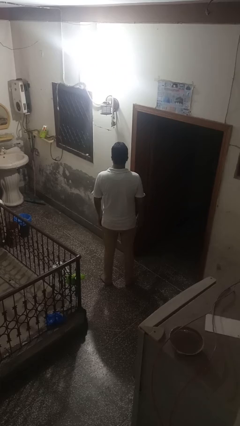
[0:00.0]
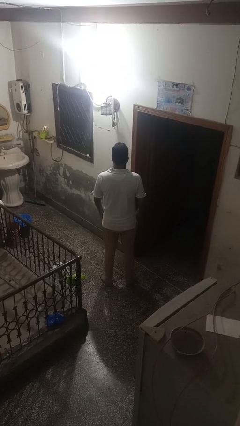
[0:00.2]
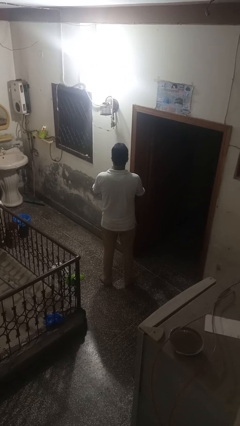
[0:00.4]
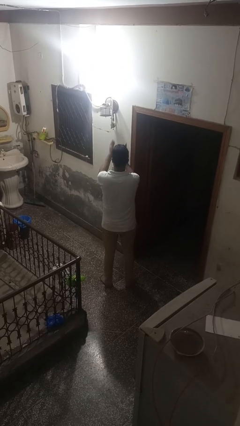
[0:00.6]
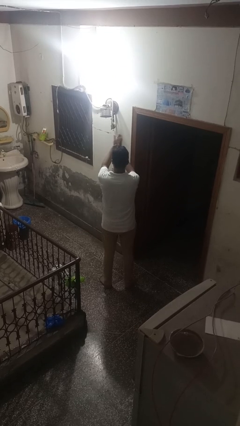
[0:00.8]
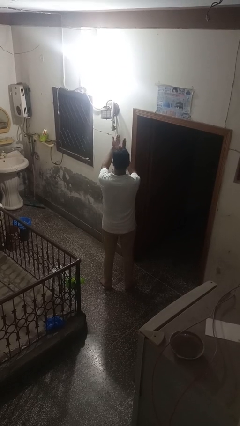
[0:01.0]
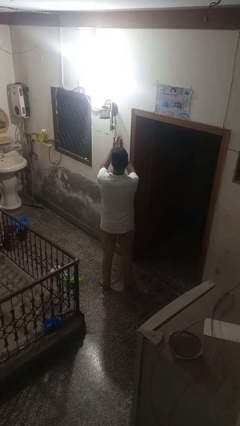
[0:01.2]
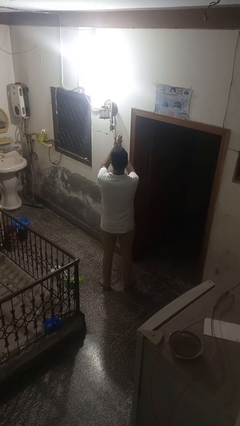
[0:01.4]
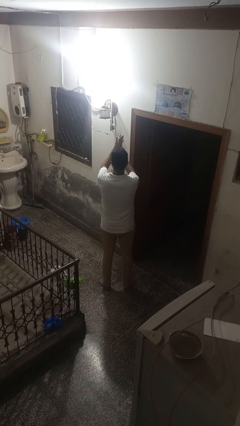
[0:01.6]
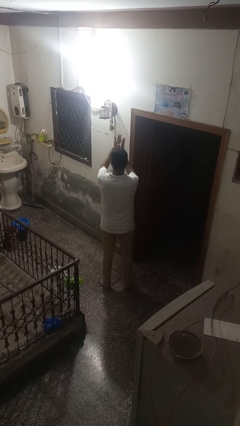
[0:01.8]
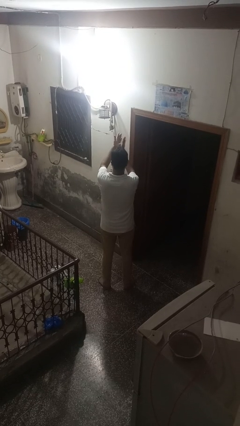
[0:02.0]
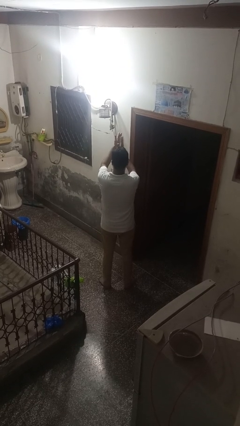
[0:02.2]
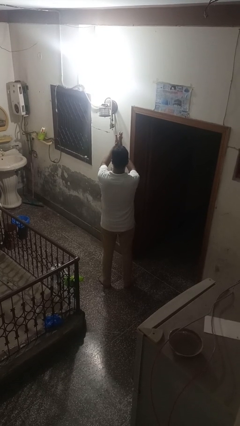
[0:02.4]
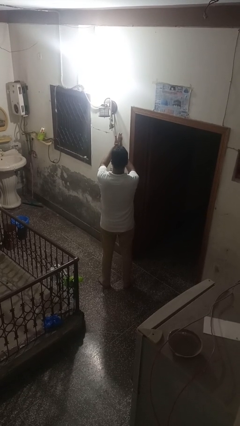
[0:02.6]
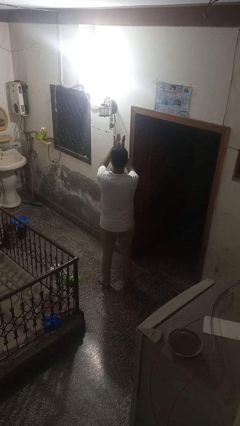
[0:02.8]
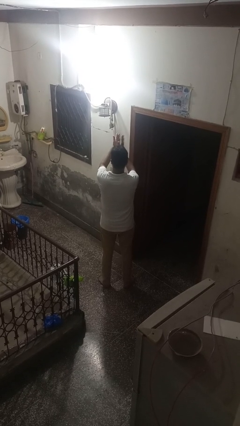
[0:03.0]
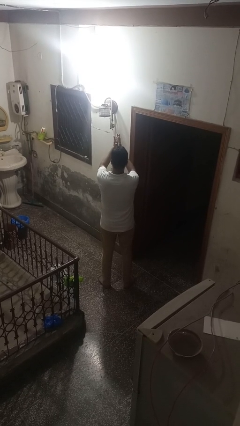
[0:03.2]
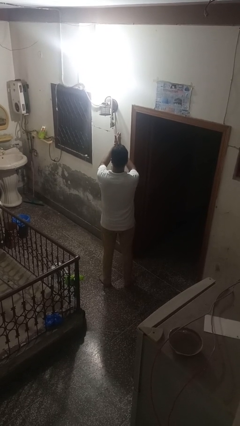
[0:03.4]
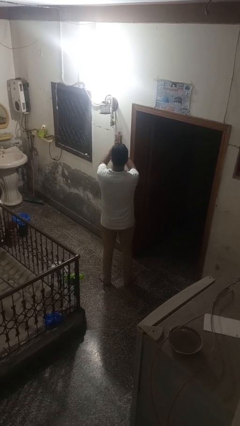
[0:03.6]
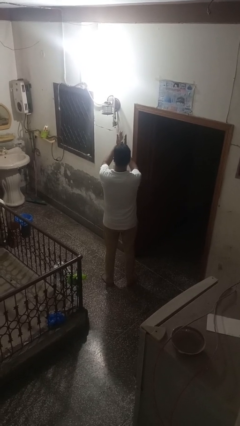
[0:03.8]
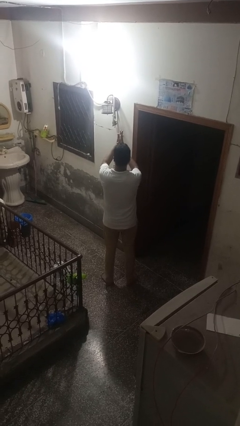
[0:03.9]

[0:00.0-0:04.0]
person claps hands

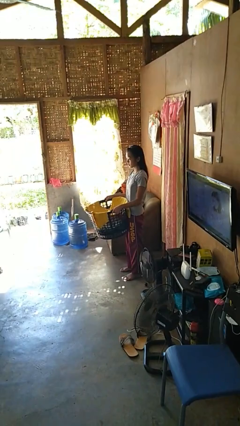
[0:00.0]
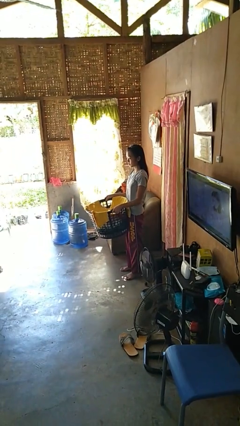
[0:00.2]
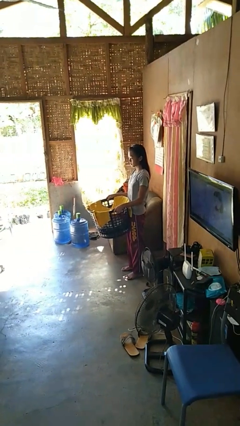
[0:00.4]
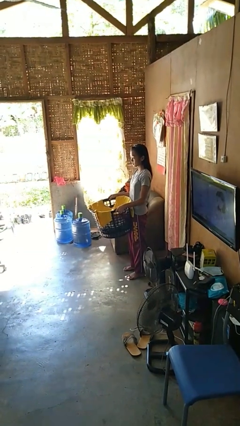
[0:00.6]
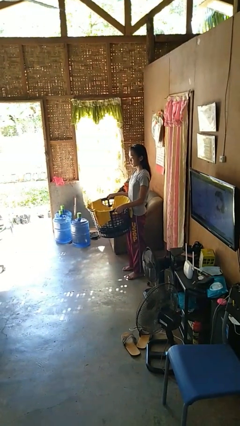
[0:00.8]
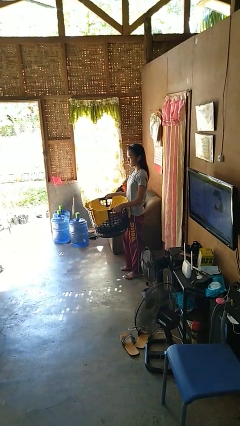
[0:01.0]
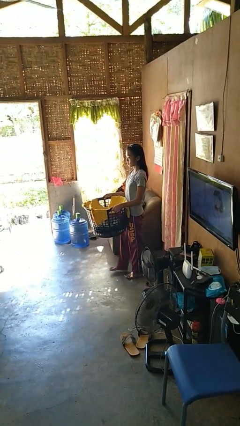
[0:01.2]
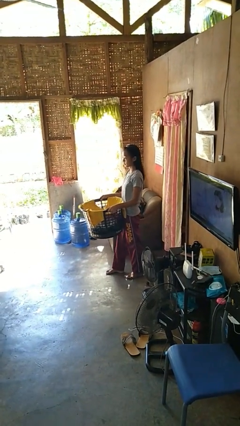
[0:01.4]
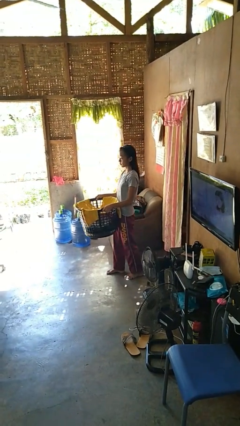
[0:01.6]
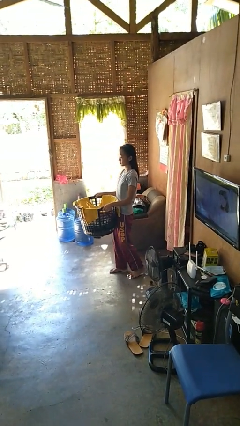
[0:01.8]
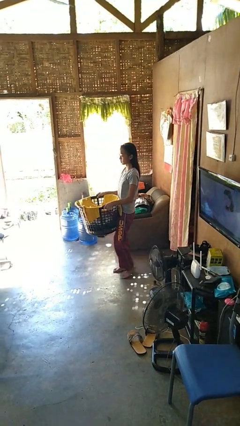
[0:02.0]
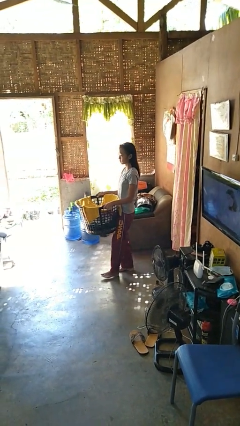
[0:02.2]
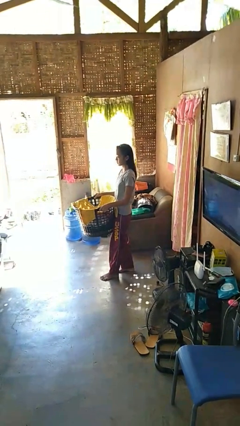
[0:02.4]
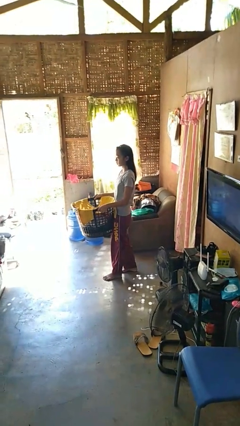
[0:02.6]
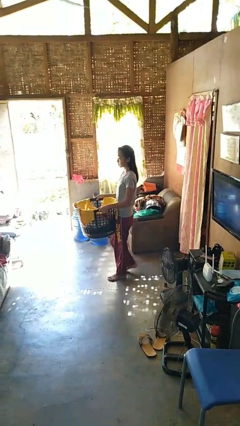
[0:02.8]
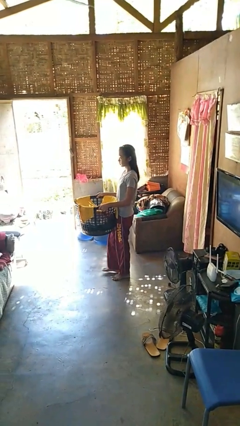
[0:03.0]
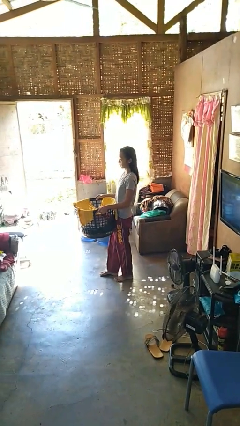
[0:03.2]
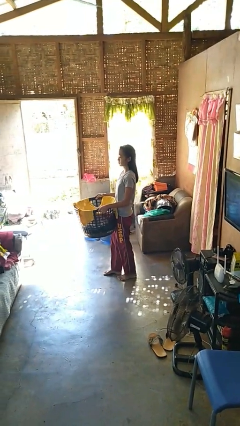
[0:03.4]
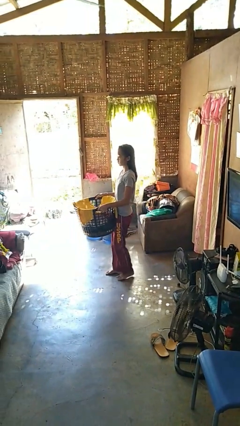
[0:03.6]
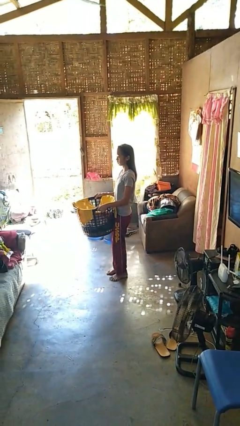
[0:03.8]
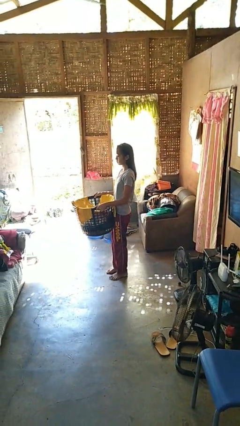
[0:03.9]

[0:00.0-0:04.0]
person carries laundry basket

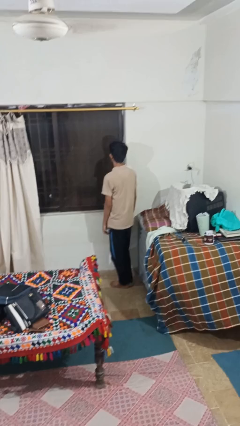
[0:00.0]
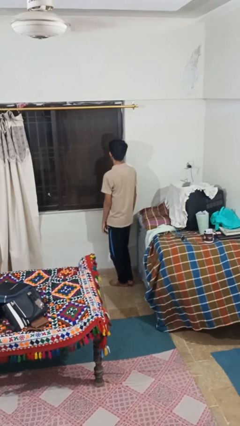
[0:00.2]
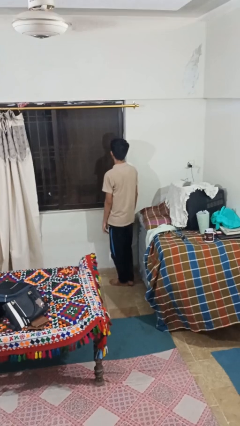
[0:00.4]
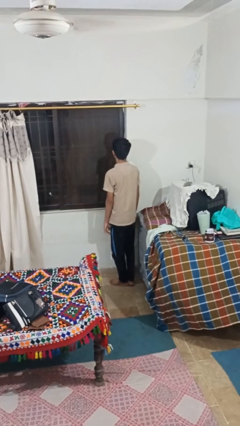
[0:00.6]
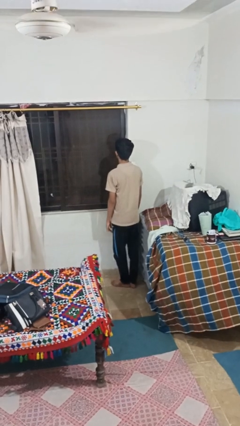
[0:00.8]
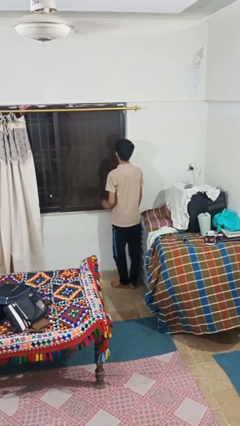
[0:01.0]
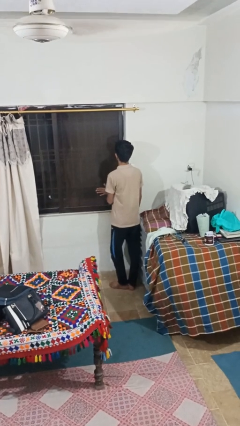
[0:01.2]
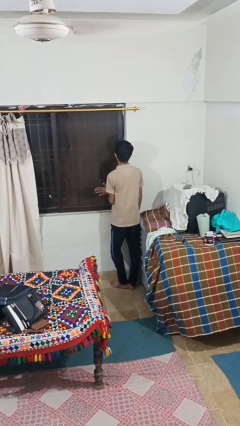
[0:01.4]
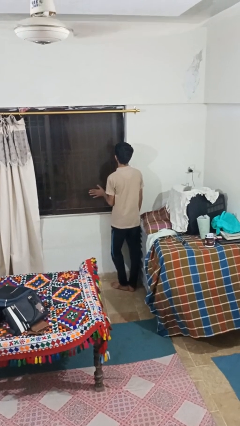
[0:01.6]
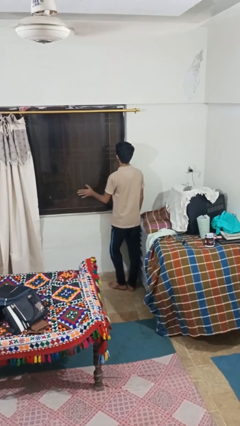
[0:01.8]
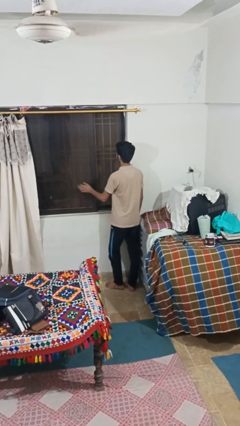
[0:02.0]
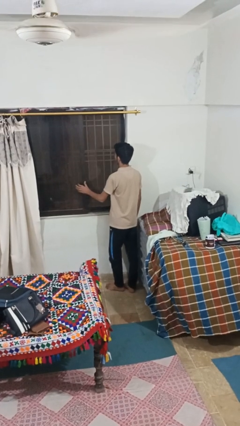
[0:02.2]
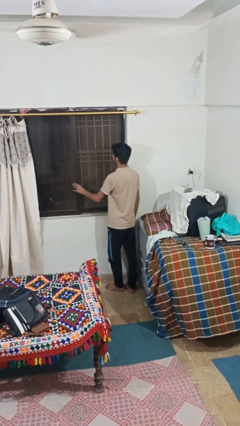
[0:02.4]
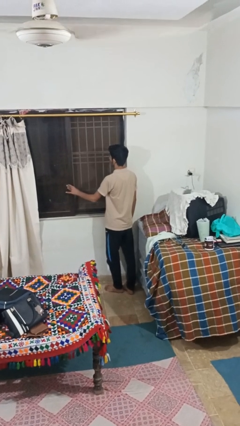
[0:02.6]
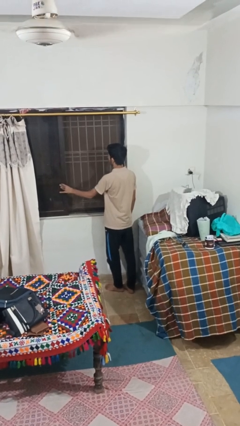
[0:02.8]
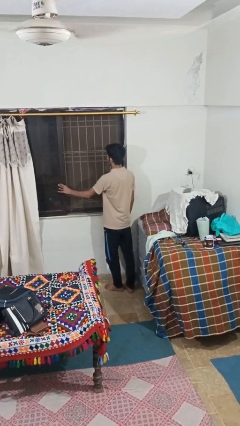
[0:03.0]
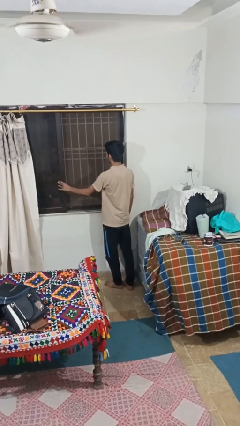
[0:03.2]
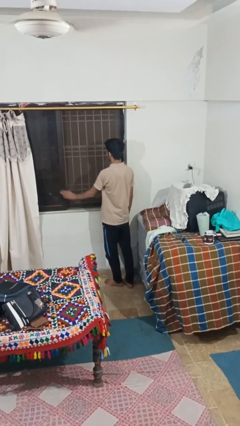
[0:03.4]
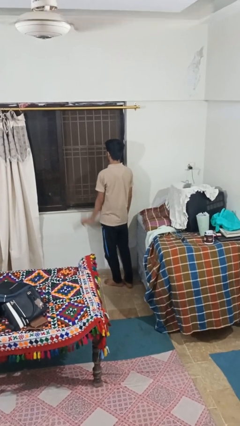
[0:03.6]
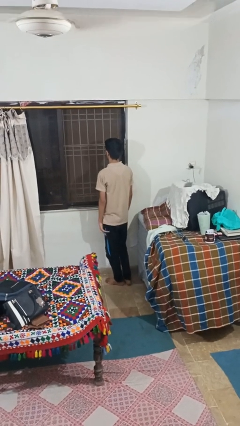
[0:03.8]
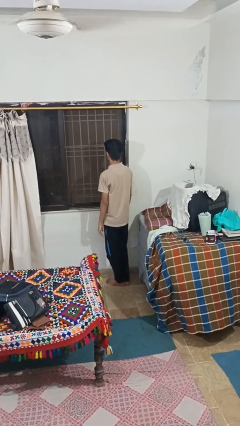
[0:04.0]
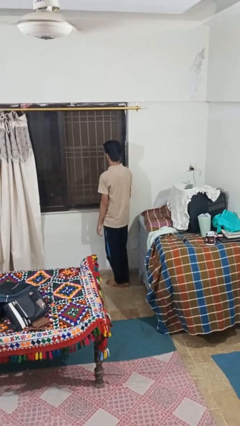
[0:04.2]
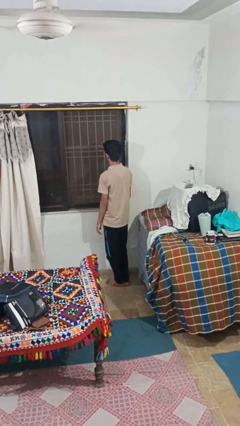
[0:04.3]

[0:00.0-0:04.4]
person opens sliding door

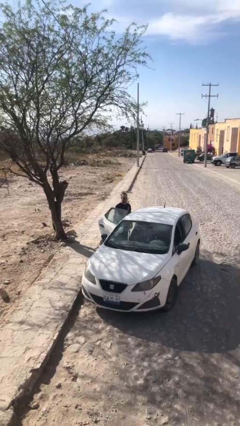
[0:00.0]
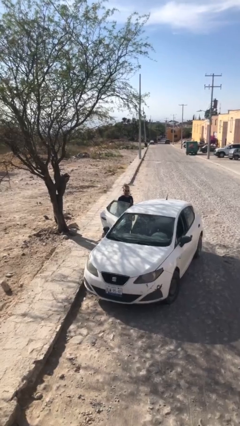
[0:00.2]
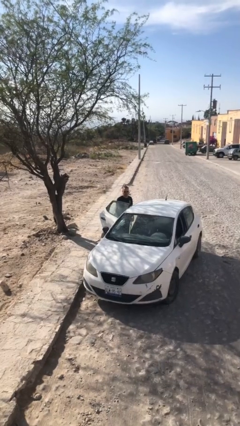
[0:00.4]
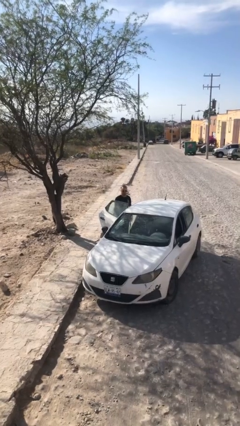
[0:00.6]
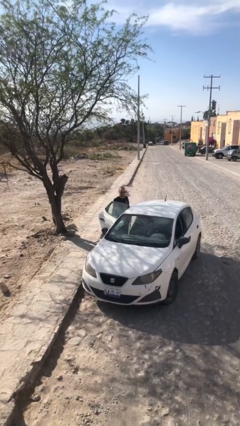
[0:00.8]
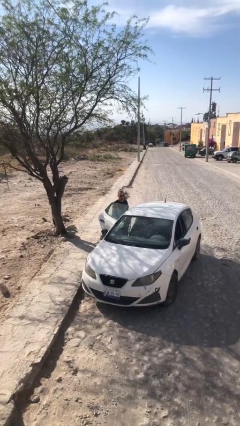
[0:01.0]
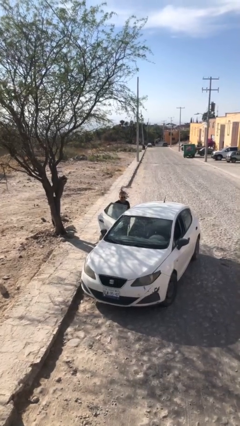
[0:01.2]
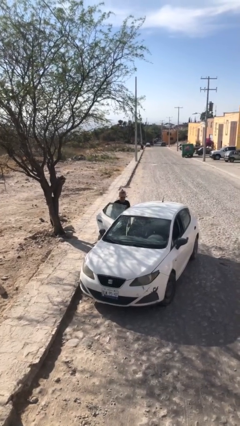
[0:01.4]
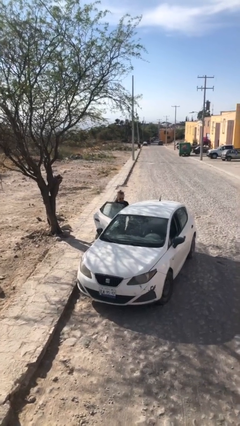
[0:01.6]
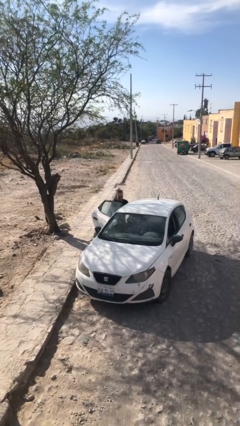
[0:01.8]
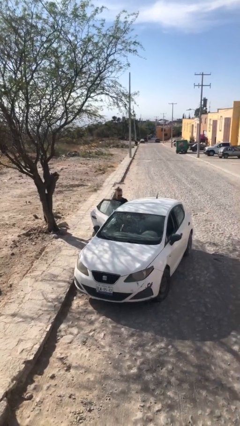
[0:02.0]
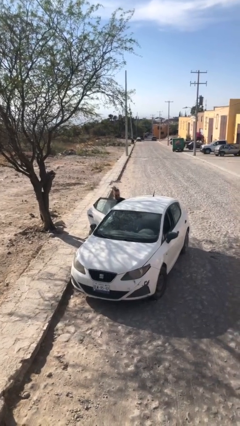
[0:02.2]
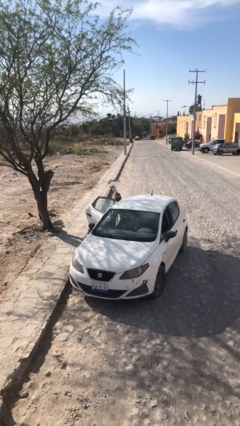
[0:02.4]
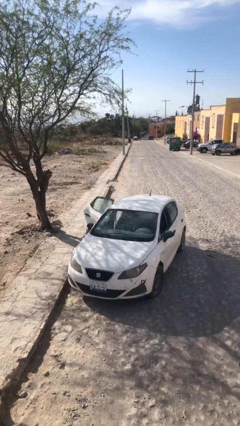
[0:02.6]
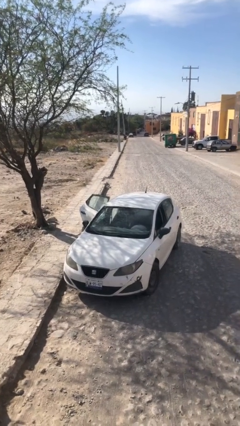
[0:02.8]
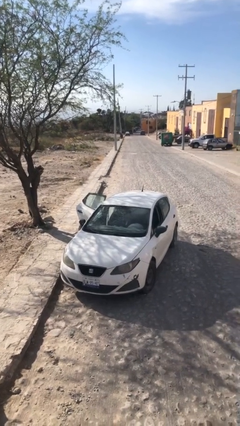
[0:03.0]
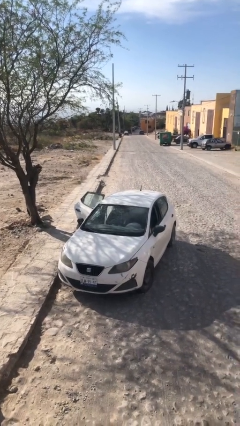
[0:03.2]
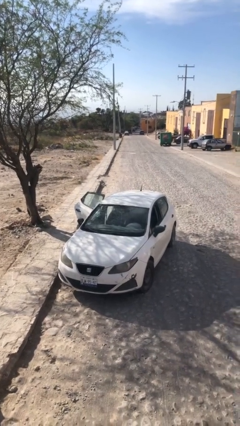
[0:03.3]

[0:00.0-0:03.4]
person enters car

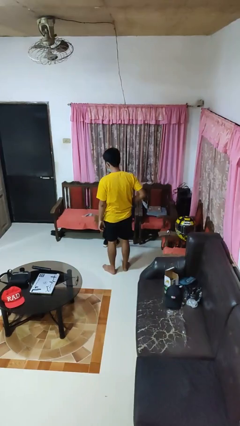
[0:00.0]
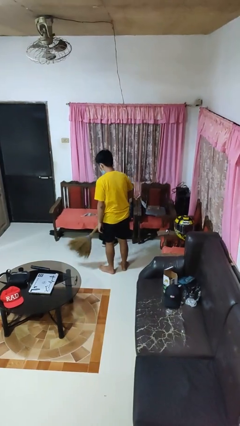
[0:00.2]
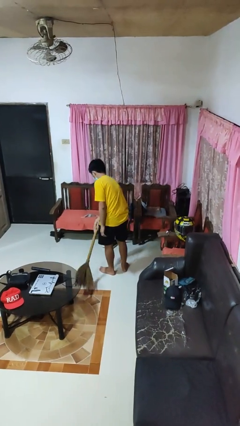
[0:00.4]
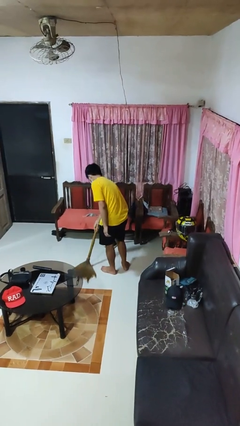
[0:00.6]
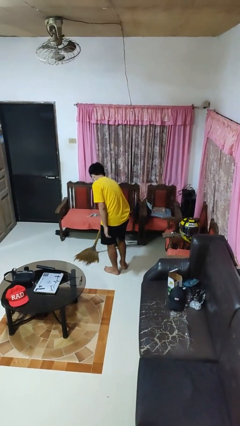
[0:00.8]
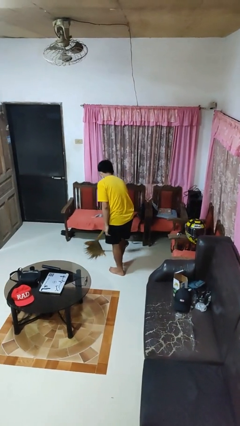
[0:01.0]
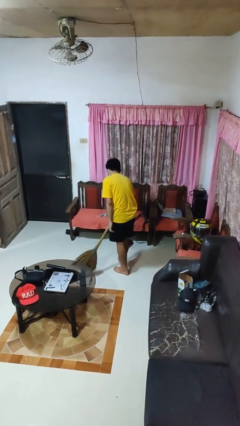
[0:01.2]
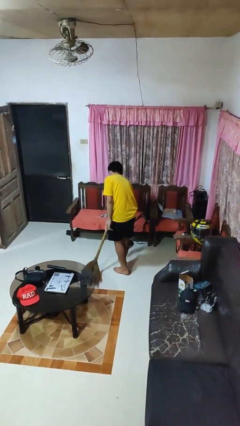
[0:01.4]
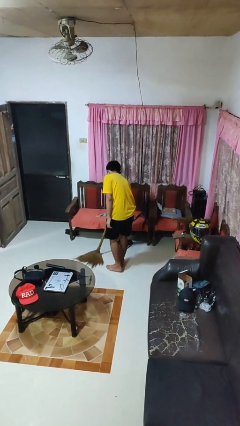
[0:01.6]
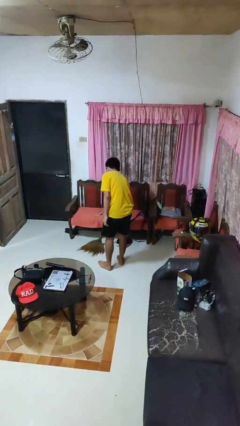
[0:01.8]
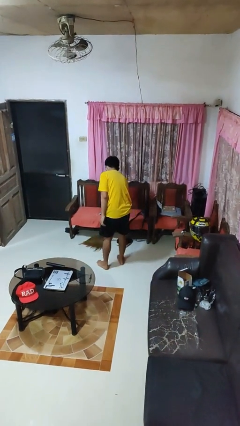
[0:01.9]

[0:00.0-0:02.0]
person sweeps floor
